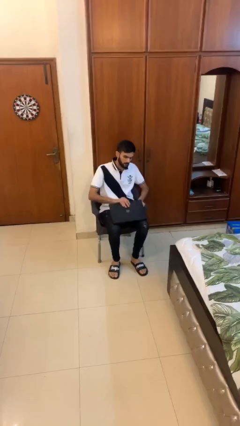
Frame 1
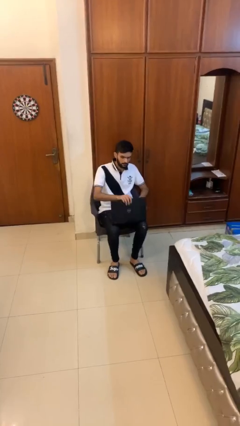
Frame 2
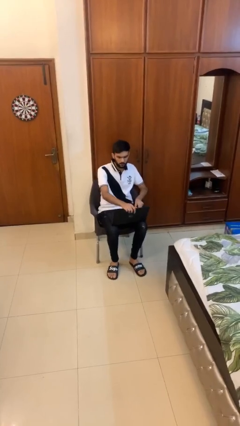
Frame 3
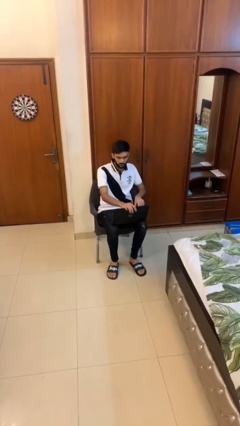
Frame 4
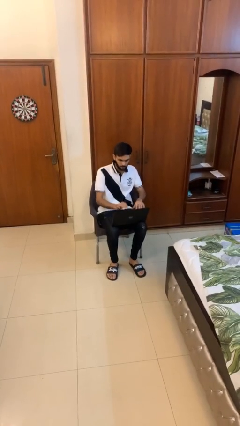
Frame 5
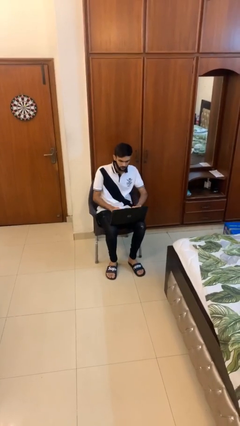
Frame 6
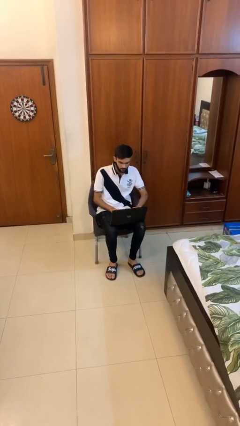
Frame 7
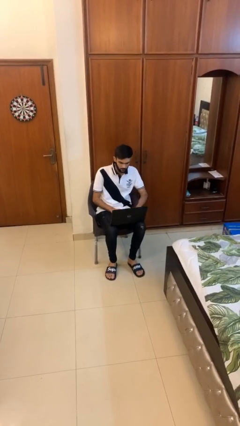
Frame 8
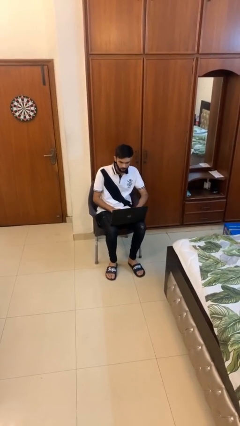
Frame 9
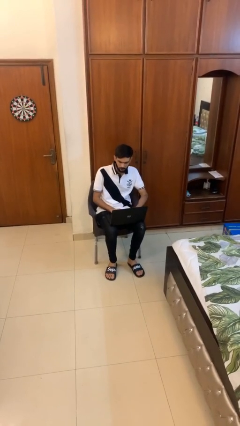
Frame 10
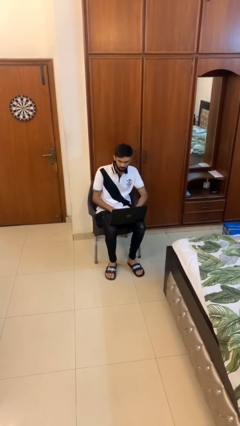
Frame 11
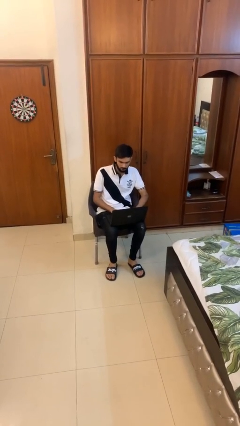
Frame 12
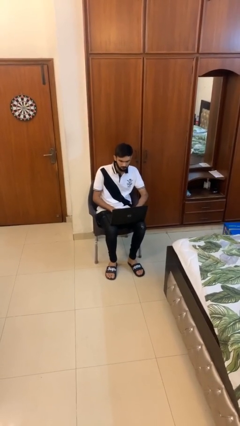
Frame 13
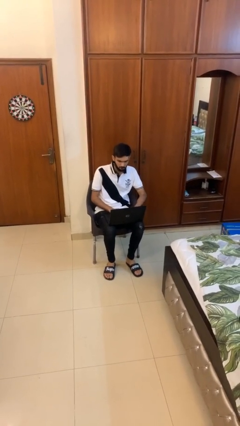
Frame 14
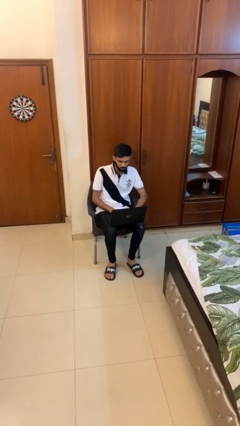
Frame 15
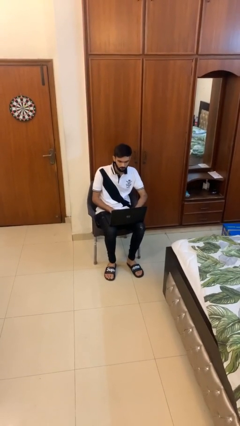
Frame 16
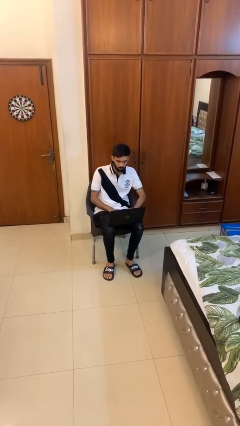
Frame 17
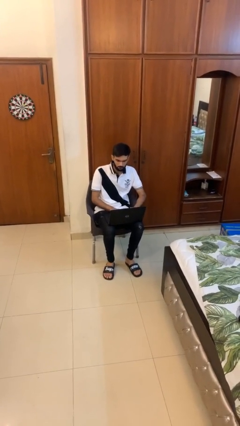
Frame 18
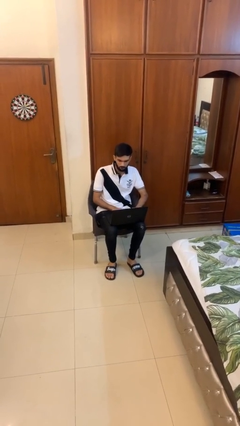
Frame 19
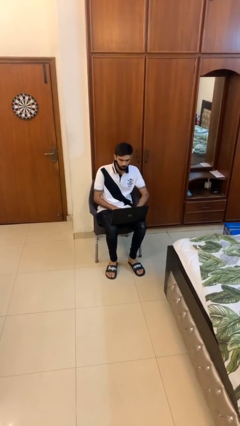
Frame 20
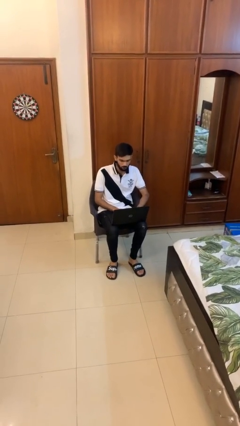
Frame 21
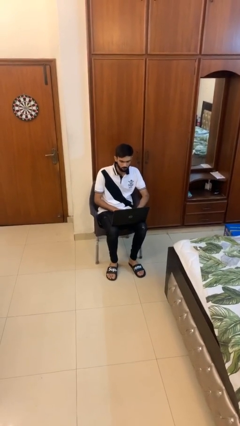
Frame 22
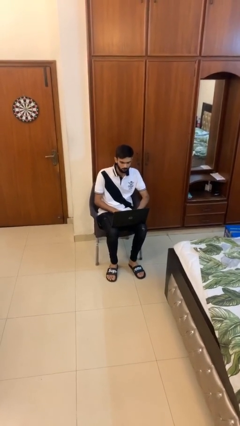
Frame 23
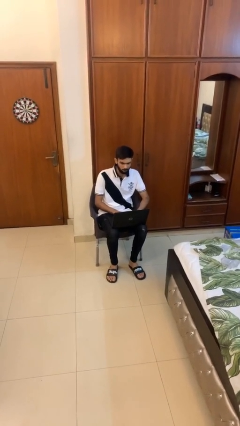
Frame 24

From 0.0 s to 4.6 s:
person interacts with laptop

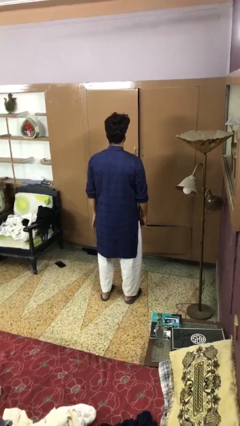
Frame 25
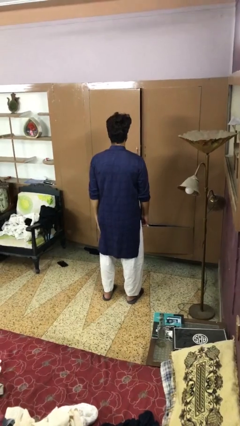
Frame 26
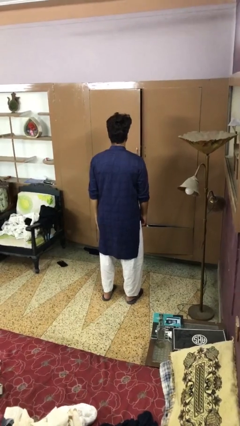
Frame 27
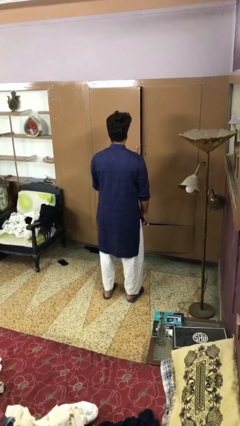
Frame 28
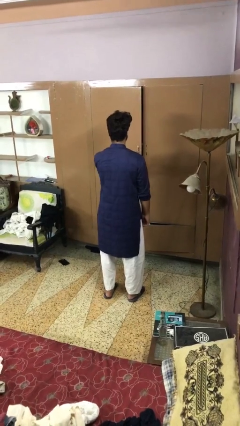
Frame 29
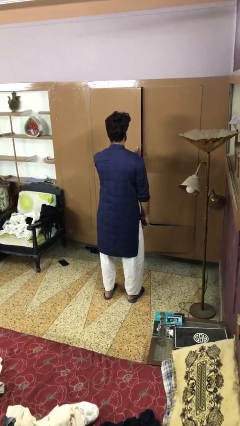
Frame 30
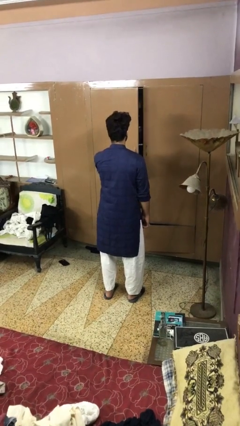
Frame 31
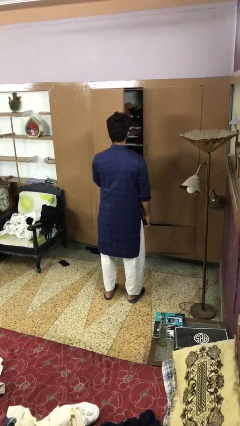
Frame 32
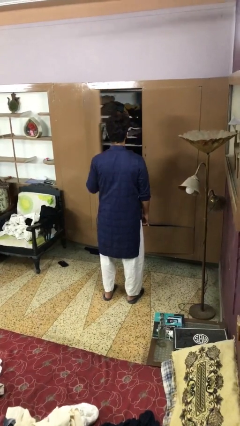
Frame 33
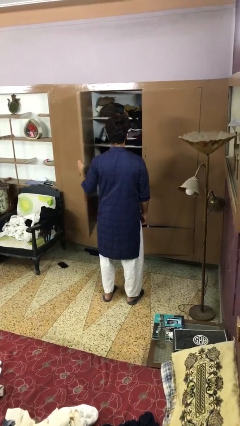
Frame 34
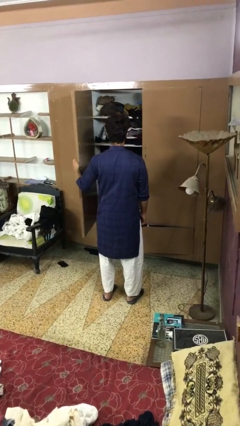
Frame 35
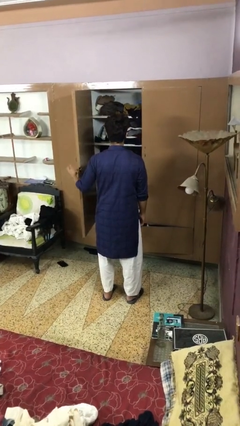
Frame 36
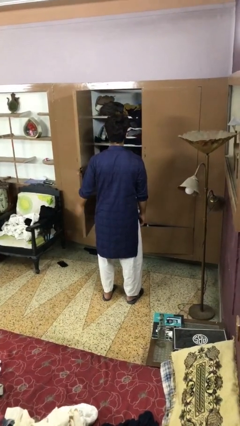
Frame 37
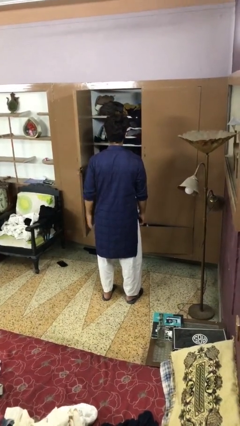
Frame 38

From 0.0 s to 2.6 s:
person opens closet door

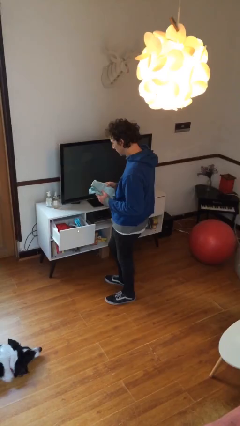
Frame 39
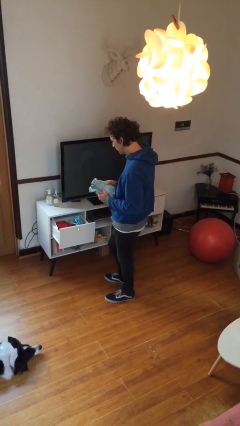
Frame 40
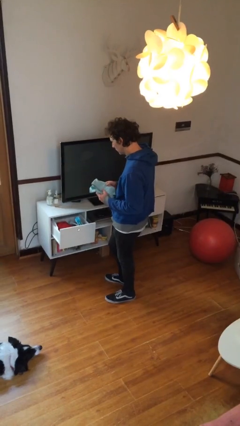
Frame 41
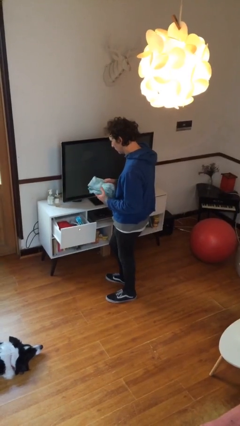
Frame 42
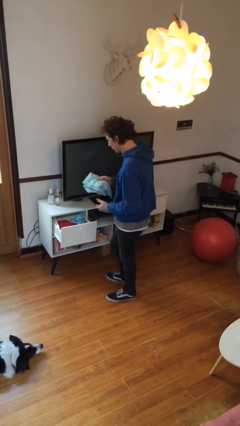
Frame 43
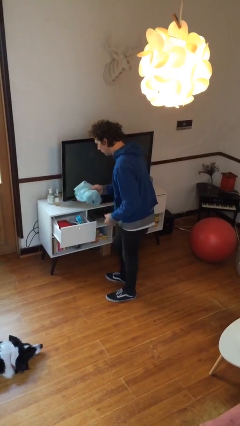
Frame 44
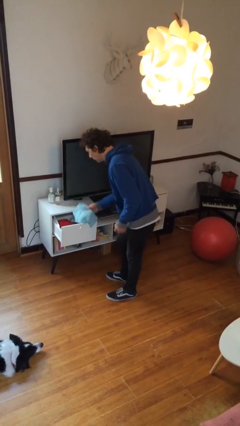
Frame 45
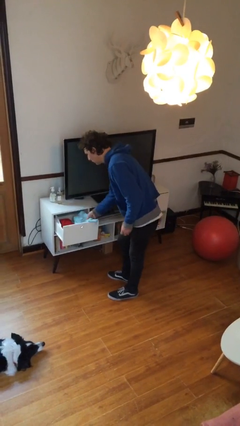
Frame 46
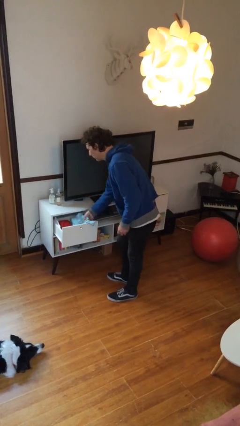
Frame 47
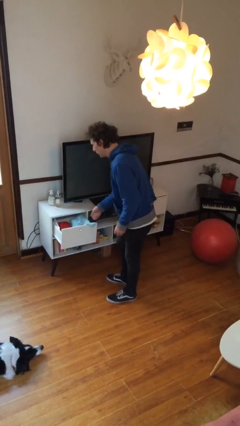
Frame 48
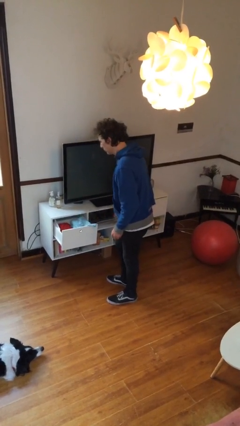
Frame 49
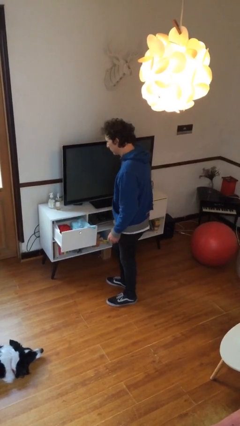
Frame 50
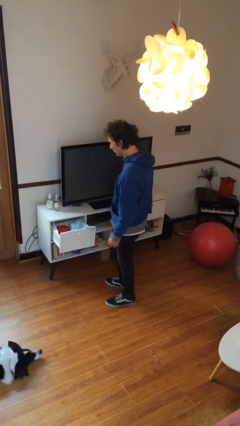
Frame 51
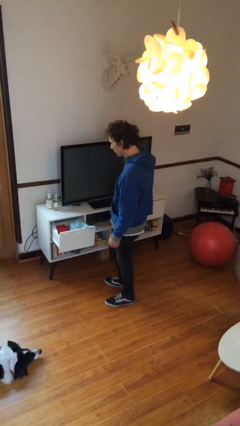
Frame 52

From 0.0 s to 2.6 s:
person puts clothes into dresser

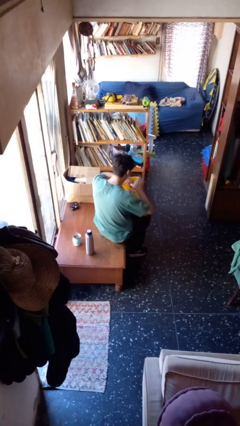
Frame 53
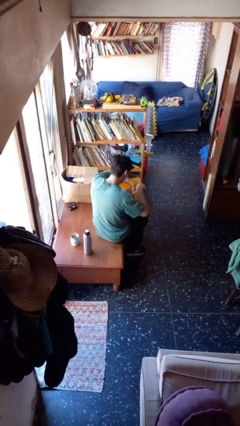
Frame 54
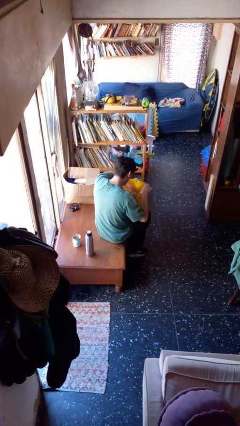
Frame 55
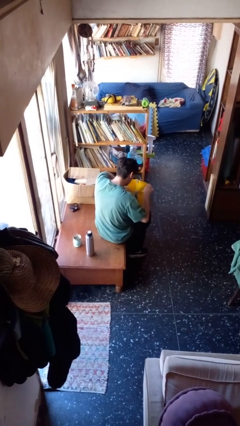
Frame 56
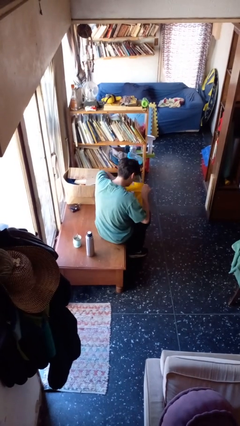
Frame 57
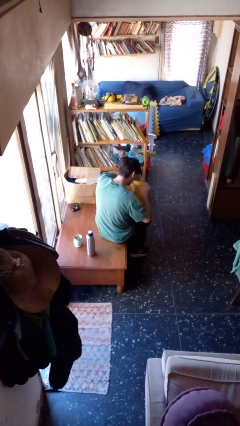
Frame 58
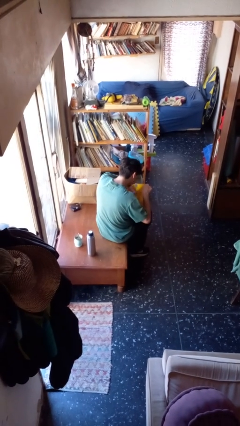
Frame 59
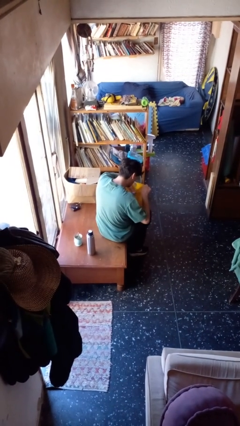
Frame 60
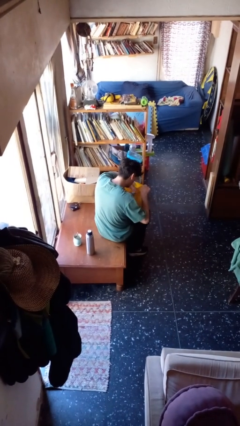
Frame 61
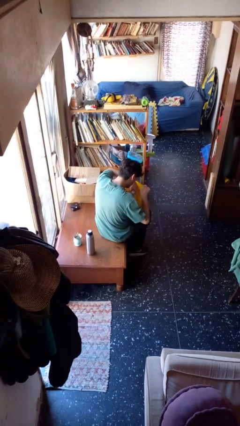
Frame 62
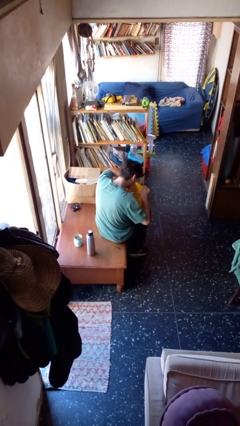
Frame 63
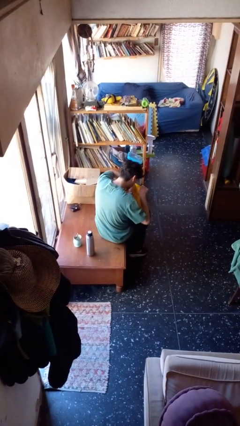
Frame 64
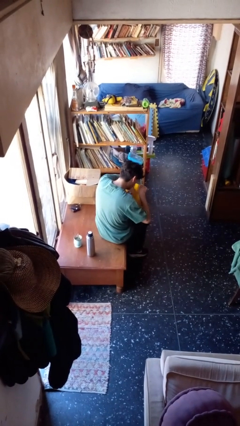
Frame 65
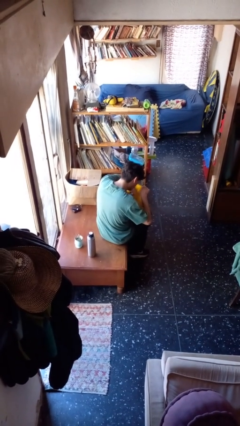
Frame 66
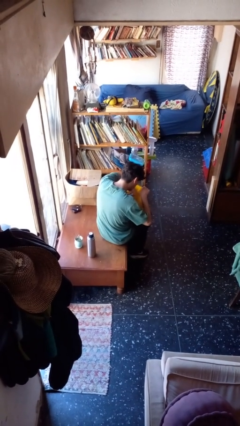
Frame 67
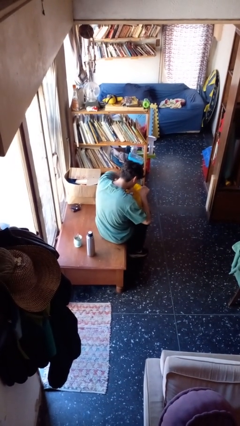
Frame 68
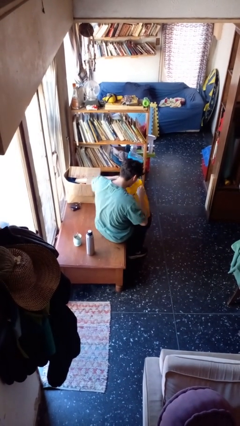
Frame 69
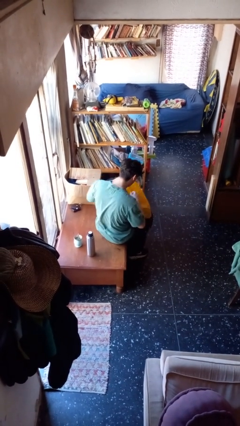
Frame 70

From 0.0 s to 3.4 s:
person searches in bag

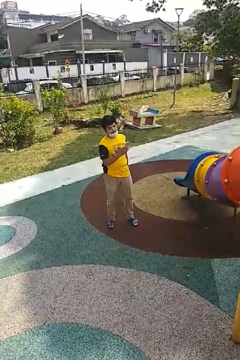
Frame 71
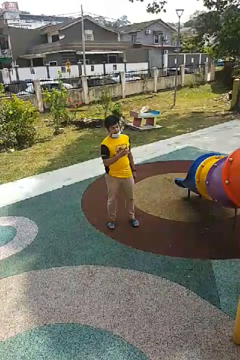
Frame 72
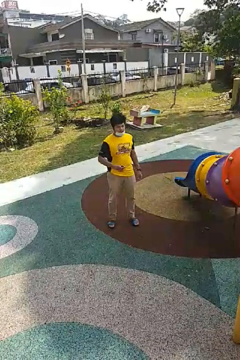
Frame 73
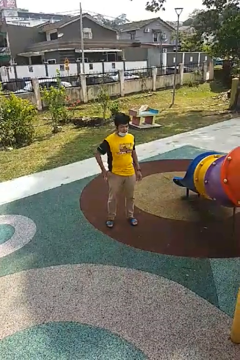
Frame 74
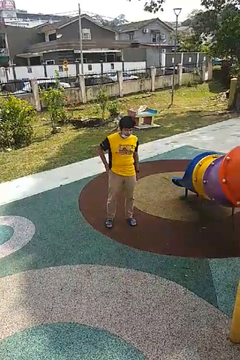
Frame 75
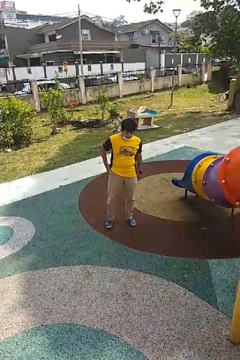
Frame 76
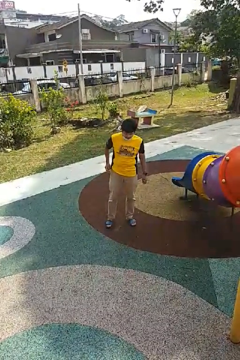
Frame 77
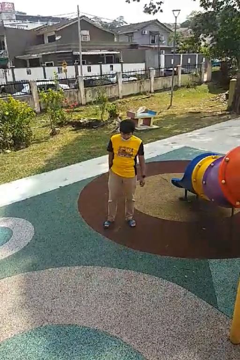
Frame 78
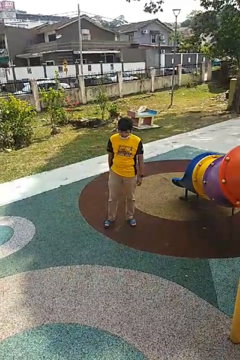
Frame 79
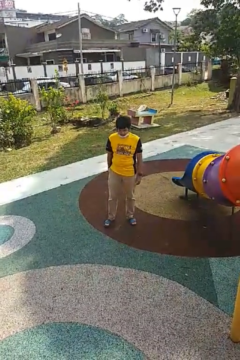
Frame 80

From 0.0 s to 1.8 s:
person puts phone into pocket

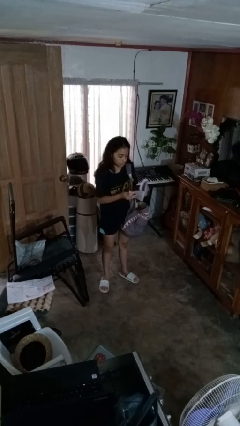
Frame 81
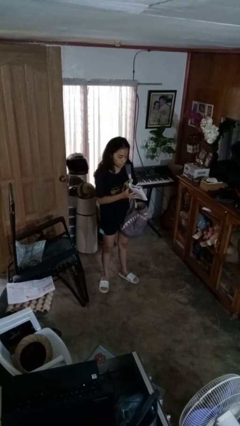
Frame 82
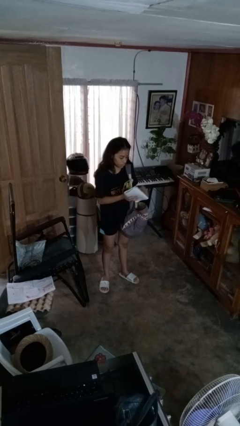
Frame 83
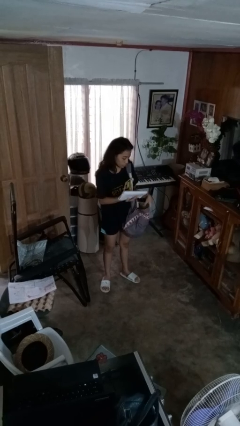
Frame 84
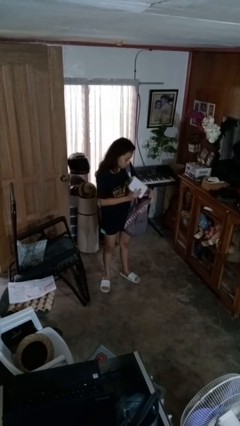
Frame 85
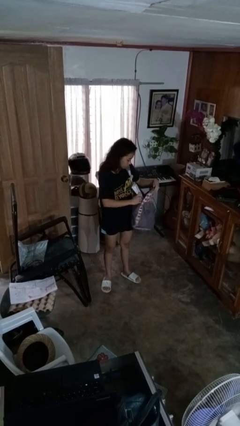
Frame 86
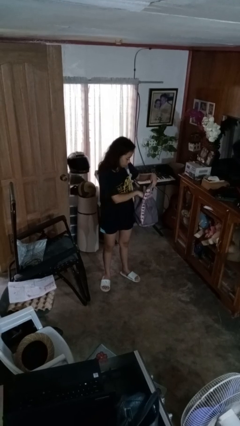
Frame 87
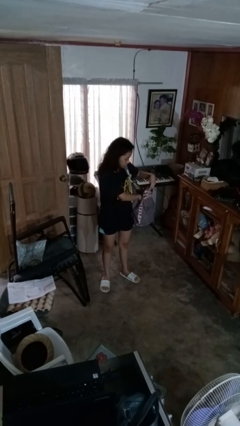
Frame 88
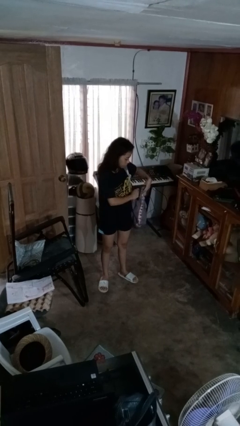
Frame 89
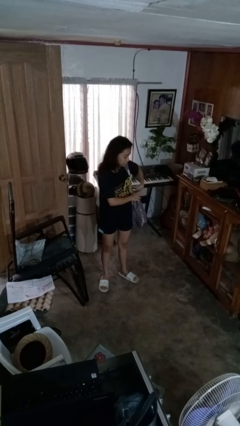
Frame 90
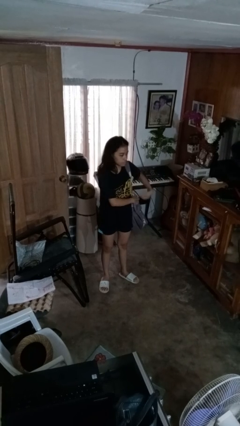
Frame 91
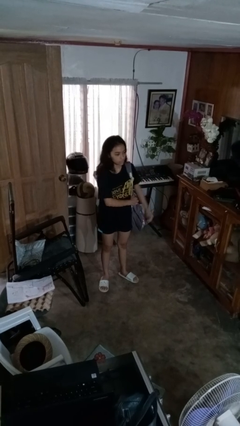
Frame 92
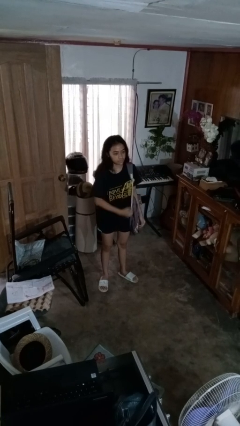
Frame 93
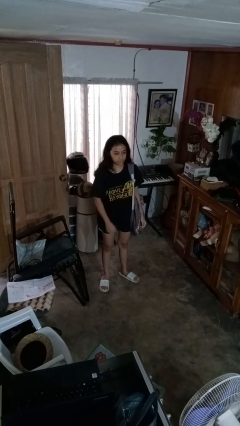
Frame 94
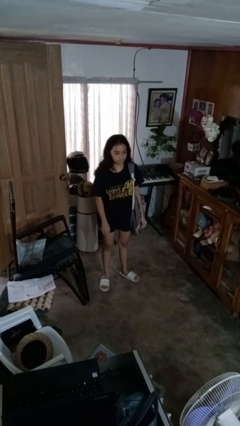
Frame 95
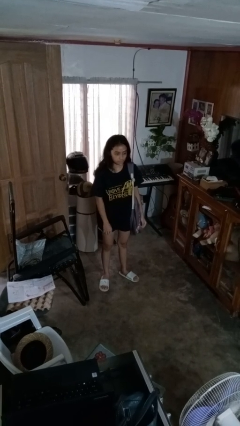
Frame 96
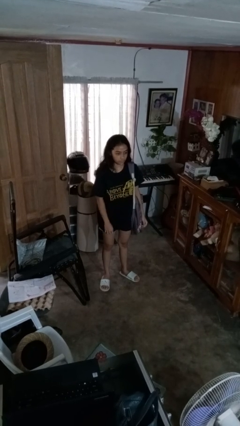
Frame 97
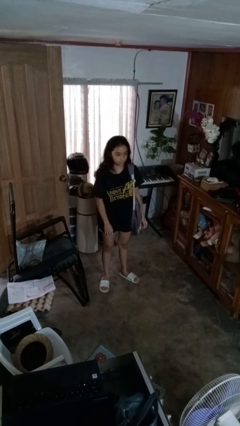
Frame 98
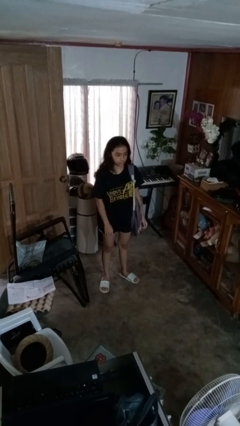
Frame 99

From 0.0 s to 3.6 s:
person puts object into backpack
